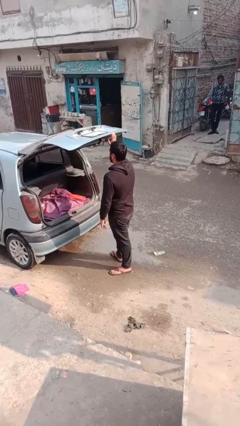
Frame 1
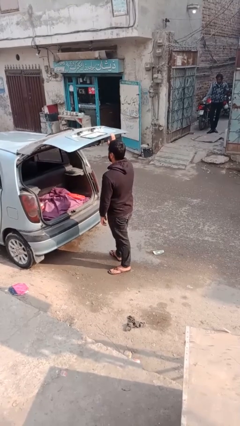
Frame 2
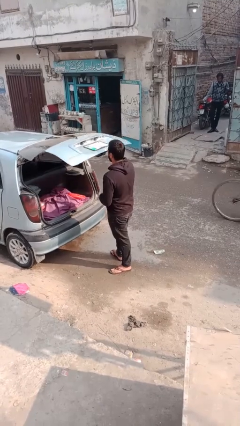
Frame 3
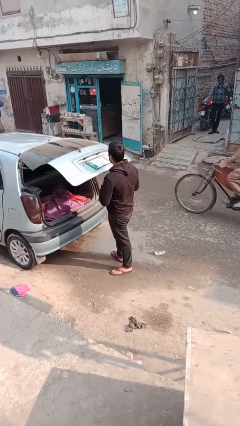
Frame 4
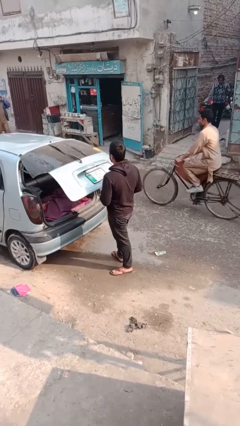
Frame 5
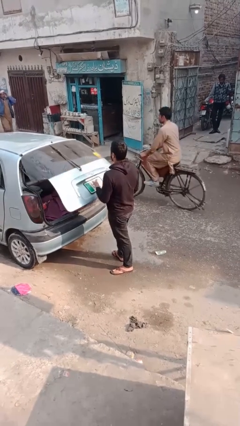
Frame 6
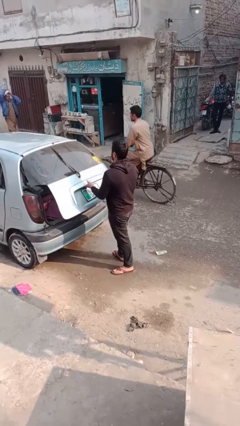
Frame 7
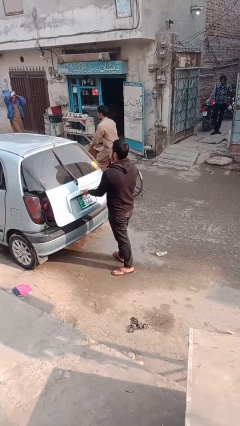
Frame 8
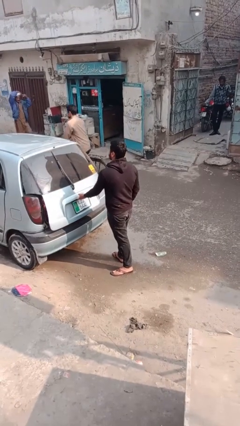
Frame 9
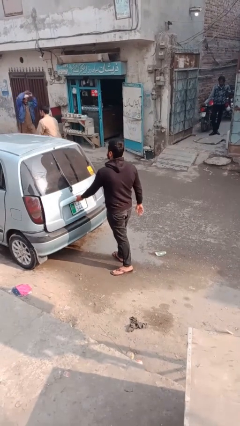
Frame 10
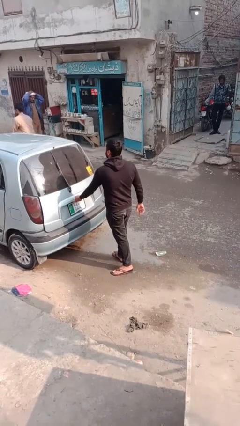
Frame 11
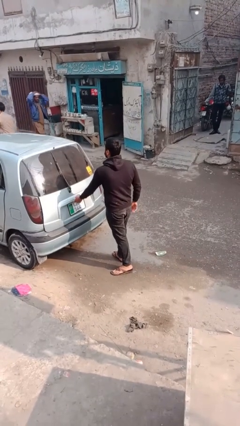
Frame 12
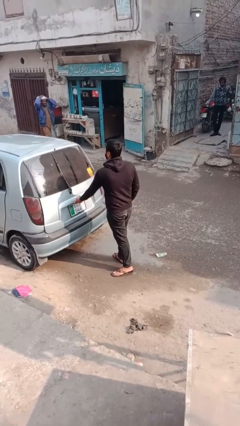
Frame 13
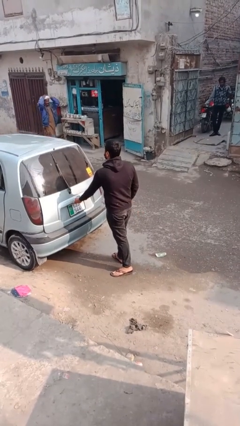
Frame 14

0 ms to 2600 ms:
person closes car trunk

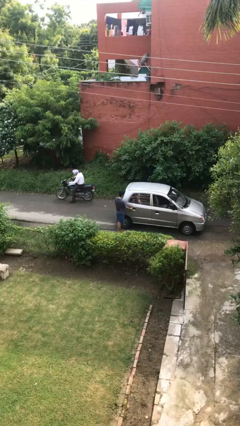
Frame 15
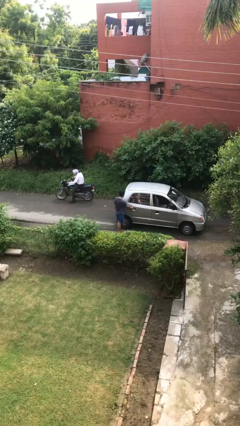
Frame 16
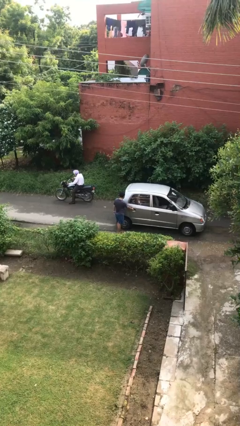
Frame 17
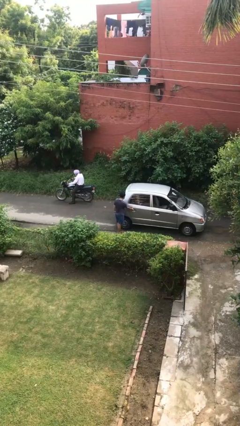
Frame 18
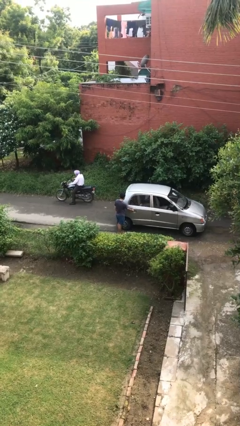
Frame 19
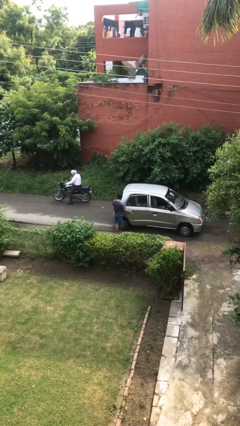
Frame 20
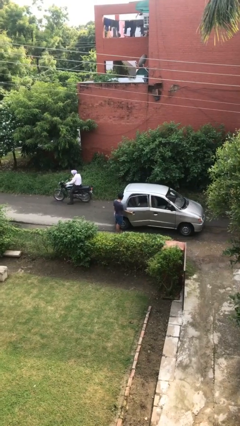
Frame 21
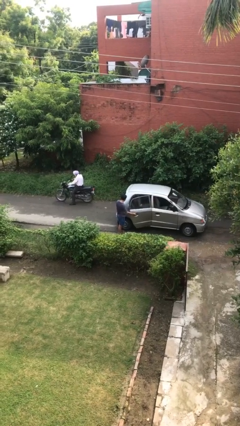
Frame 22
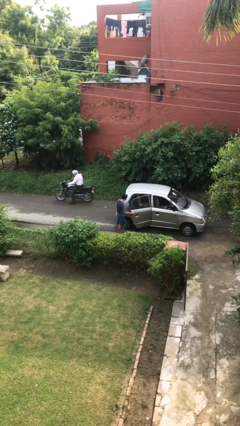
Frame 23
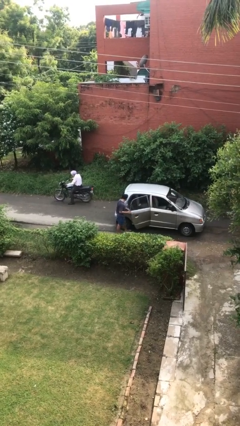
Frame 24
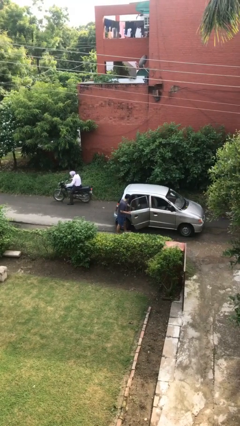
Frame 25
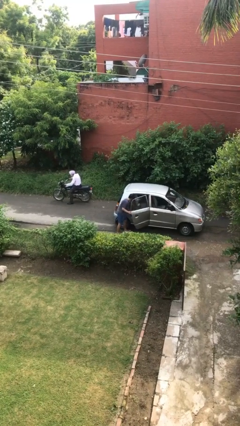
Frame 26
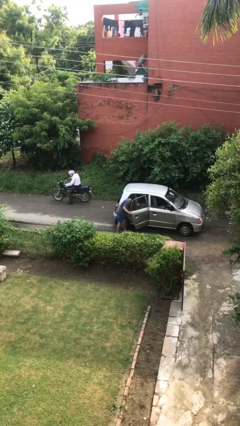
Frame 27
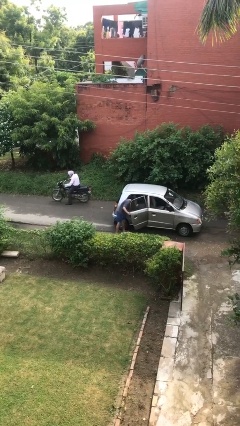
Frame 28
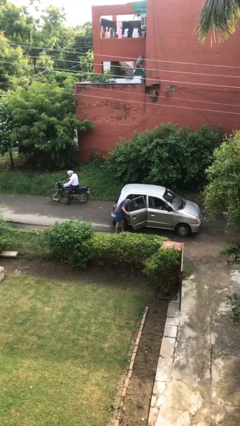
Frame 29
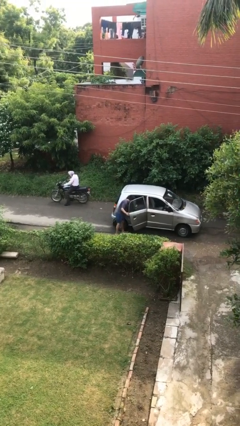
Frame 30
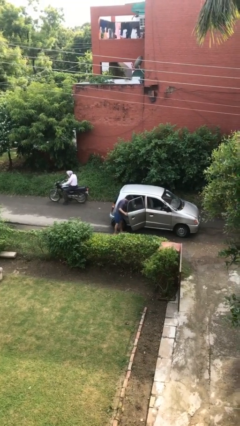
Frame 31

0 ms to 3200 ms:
person opens car door

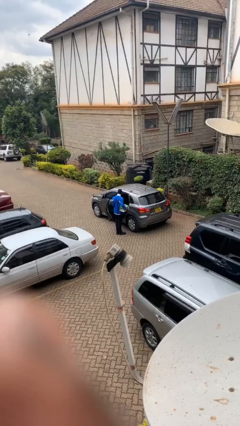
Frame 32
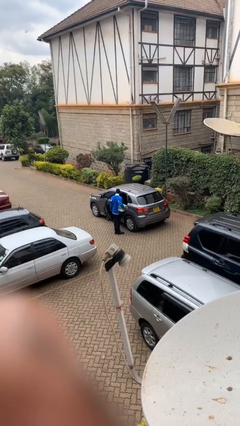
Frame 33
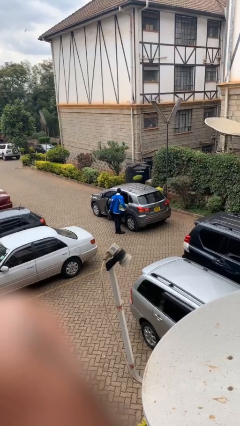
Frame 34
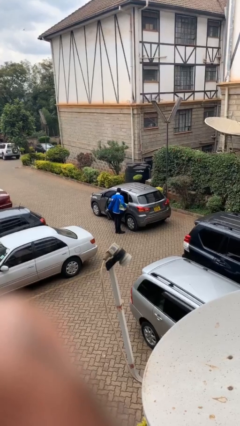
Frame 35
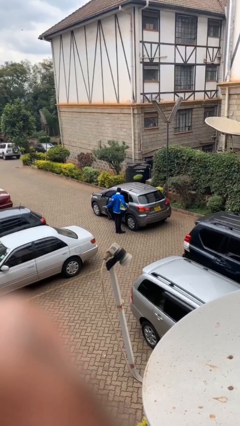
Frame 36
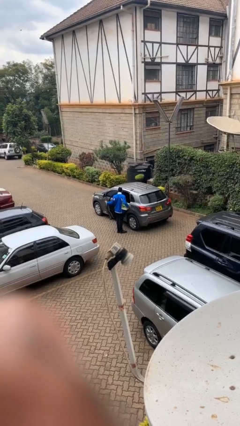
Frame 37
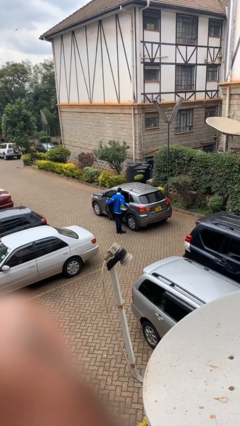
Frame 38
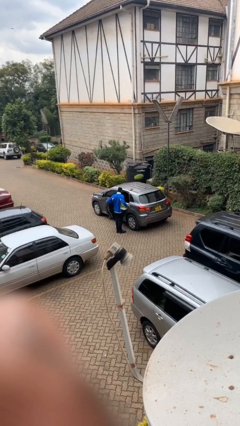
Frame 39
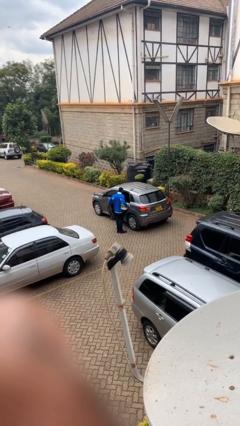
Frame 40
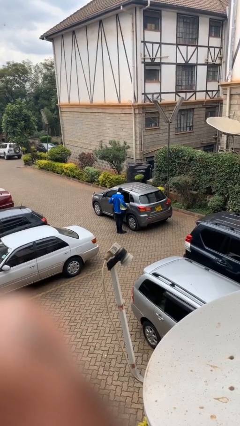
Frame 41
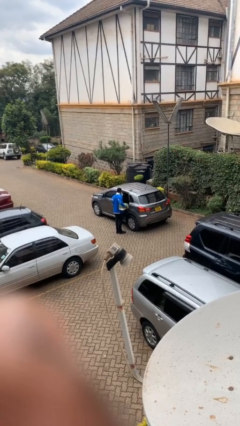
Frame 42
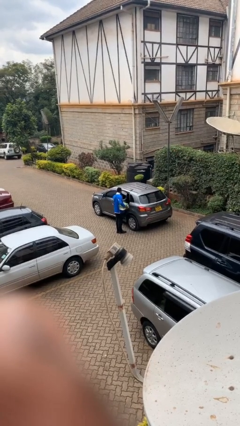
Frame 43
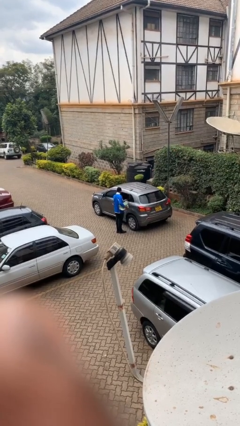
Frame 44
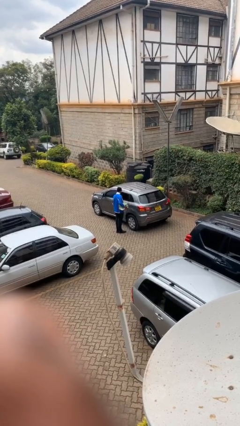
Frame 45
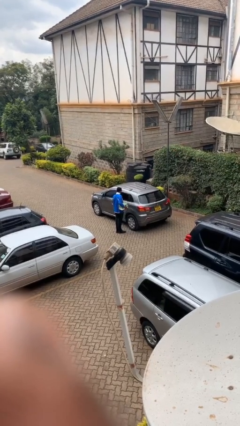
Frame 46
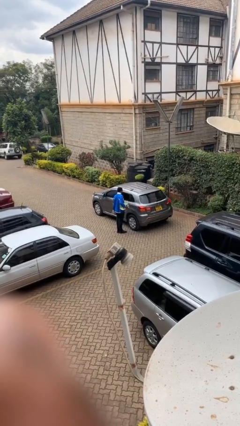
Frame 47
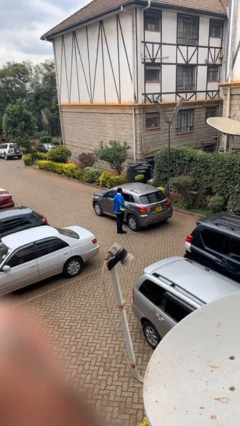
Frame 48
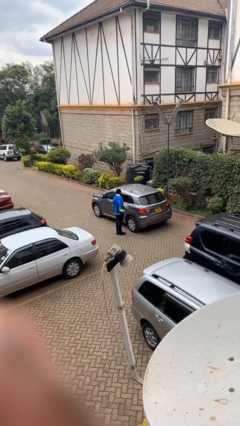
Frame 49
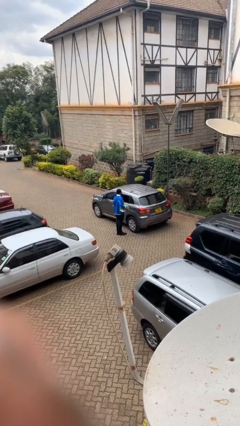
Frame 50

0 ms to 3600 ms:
person closes car door

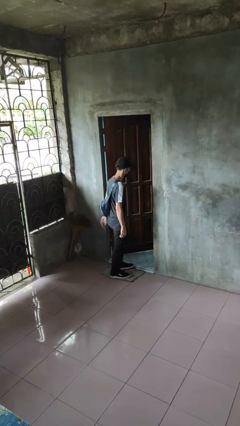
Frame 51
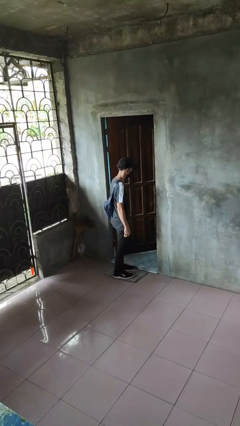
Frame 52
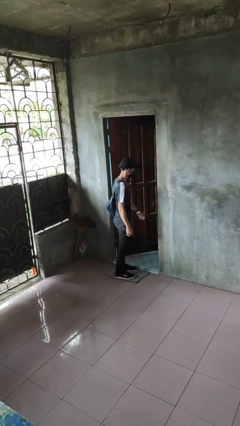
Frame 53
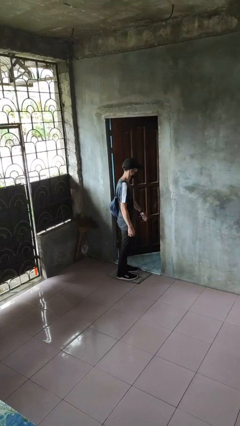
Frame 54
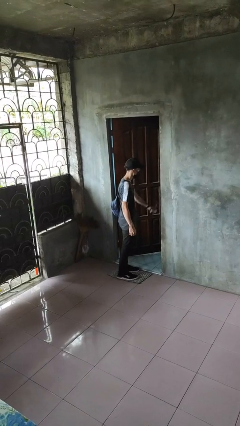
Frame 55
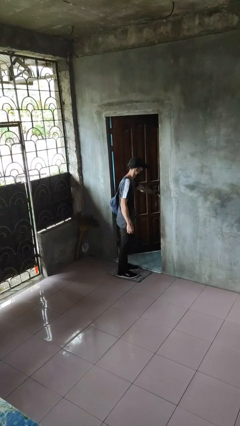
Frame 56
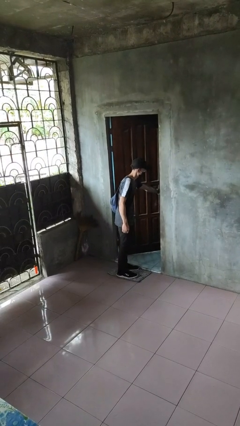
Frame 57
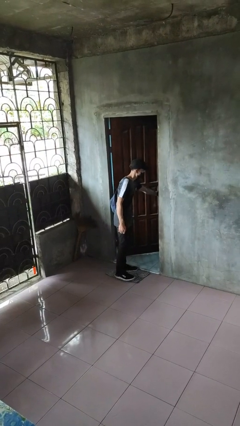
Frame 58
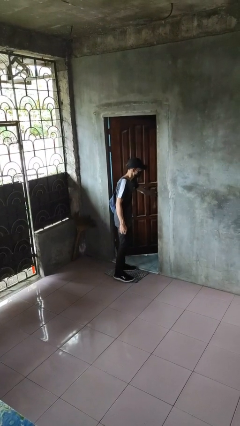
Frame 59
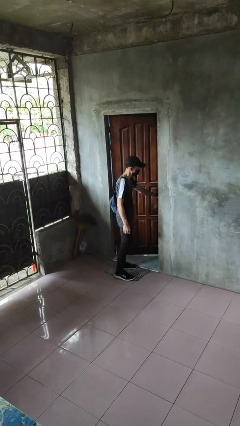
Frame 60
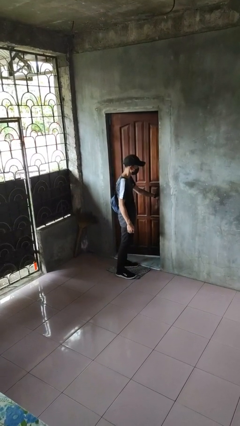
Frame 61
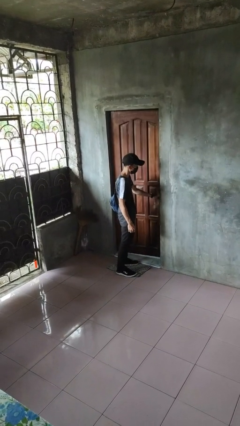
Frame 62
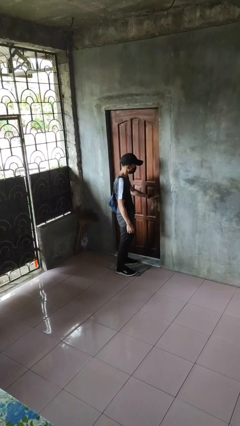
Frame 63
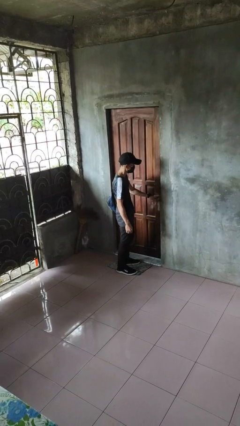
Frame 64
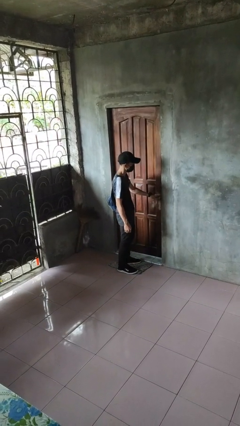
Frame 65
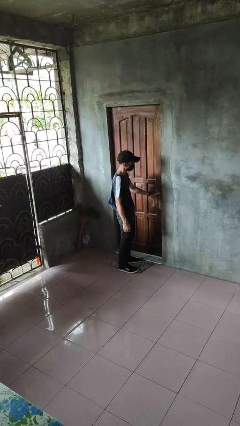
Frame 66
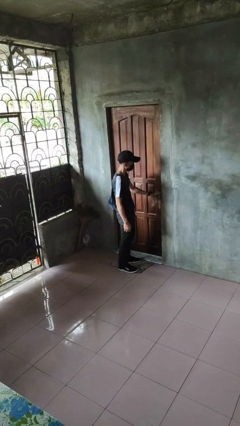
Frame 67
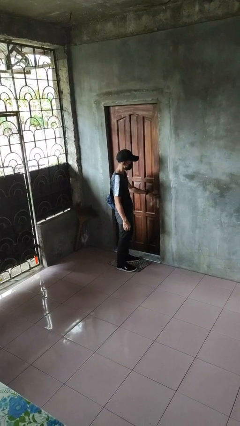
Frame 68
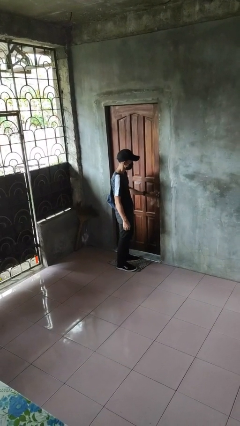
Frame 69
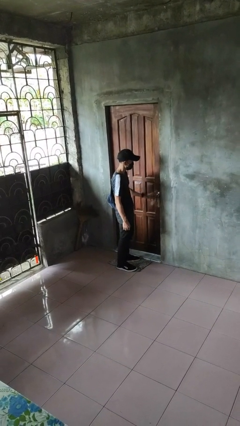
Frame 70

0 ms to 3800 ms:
person closes facility door

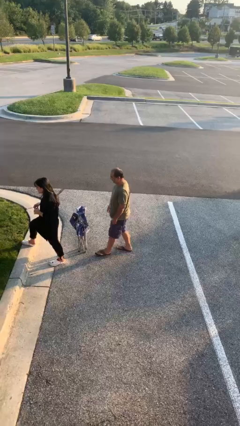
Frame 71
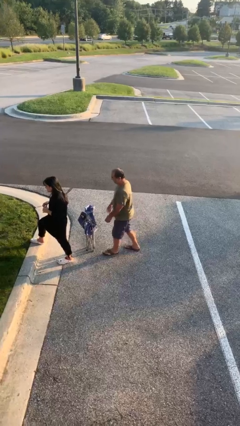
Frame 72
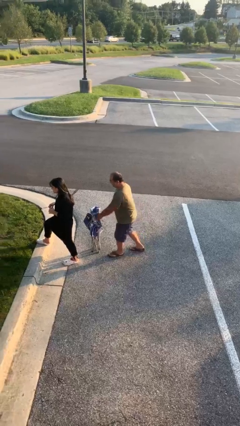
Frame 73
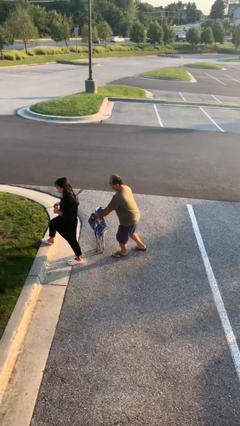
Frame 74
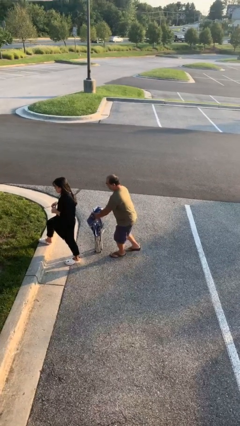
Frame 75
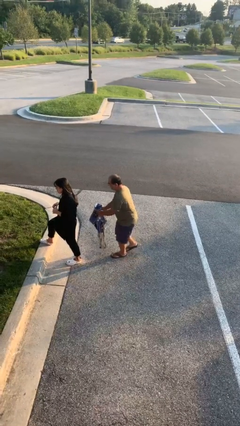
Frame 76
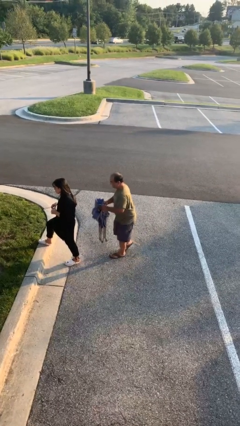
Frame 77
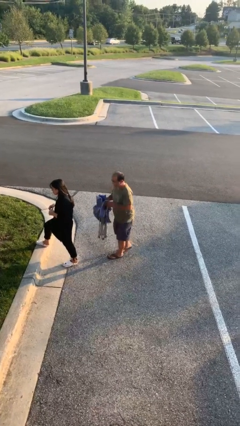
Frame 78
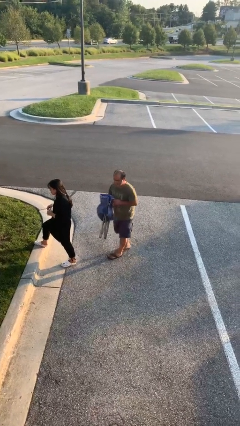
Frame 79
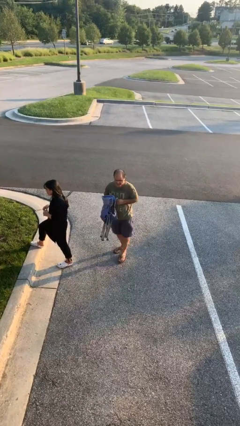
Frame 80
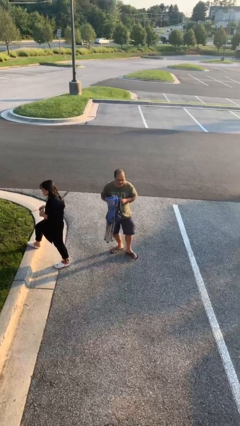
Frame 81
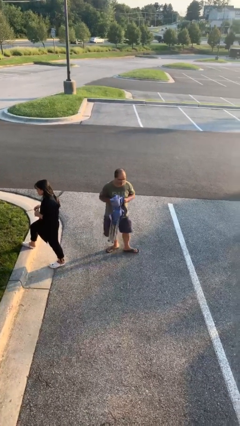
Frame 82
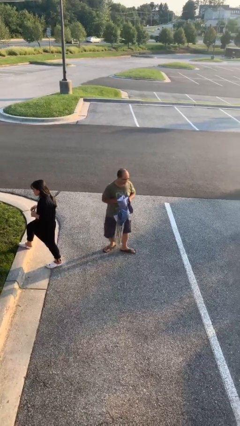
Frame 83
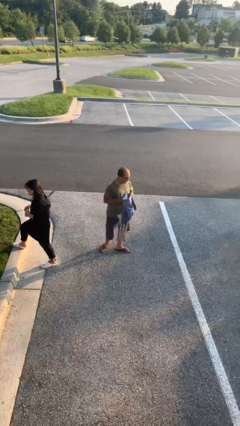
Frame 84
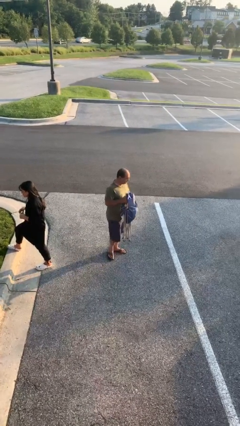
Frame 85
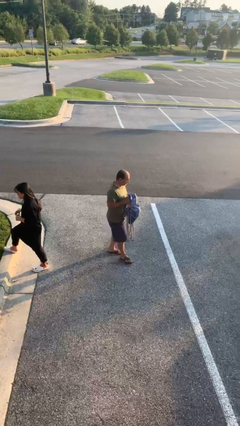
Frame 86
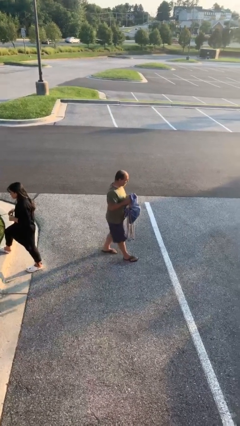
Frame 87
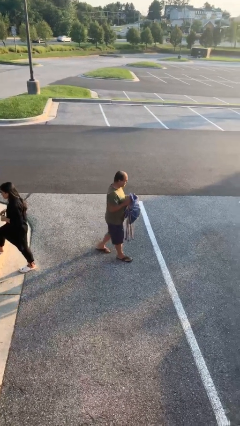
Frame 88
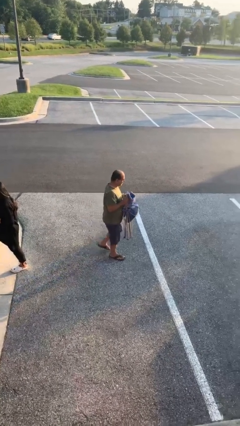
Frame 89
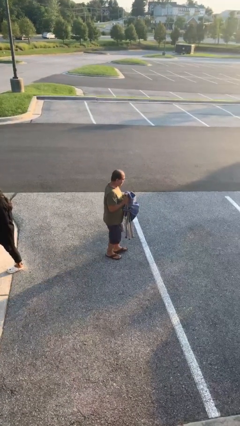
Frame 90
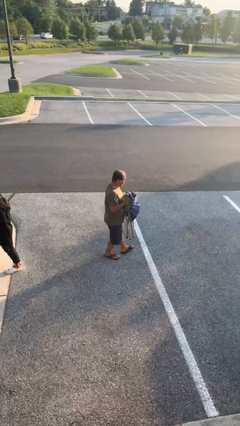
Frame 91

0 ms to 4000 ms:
person steals object from person
